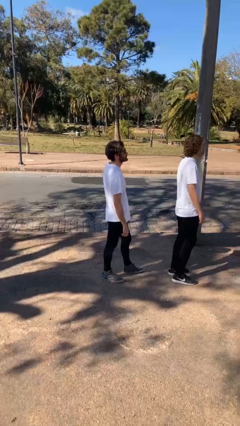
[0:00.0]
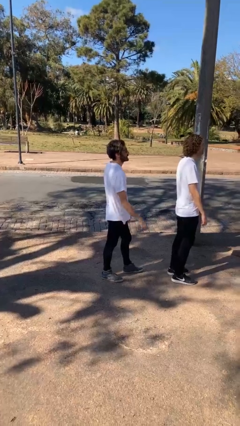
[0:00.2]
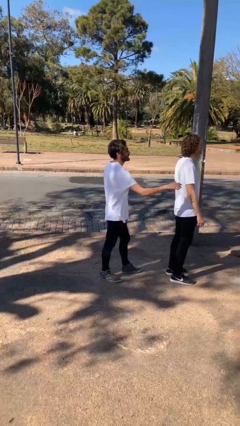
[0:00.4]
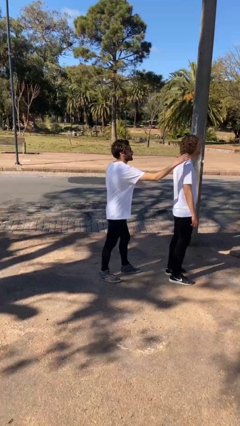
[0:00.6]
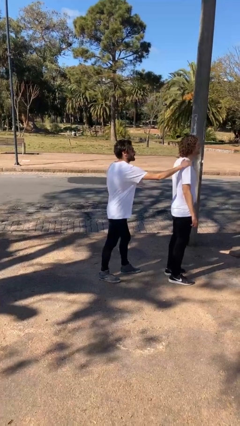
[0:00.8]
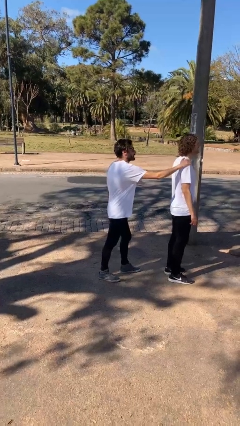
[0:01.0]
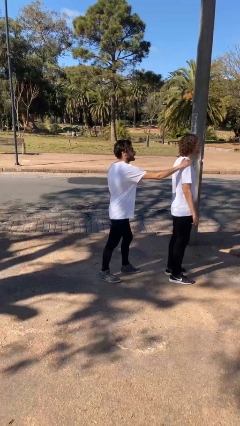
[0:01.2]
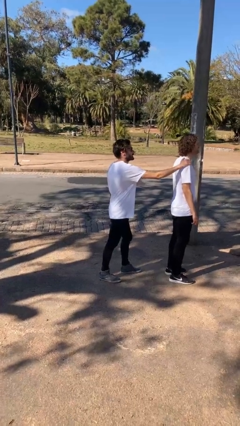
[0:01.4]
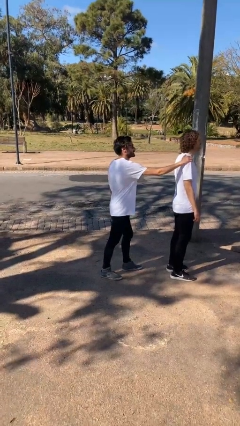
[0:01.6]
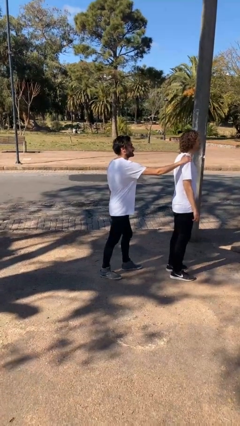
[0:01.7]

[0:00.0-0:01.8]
person grabs person by shoulder

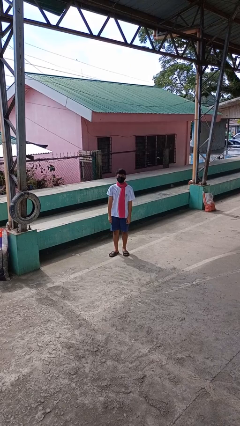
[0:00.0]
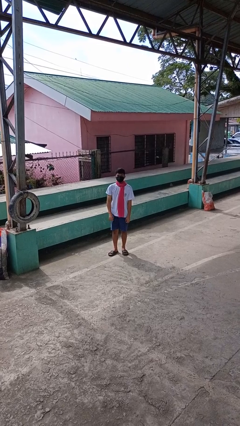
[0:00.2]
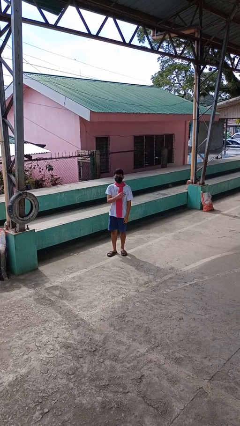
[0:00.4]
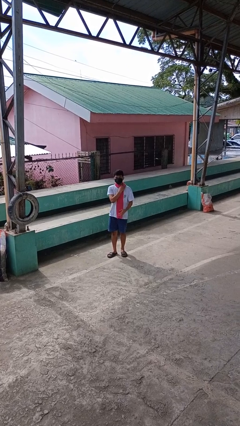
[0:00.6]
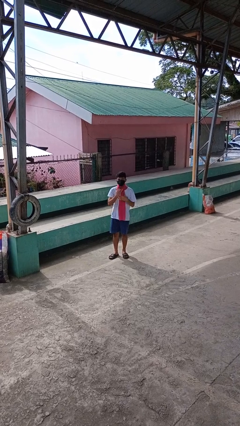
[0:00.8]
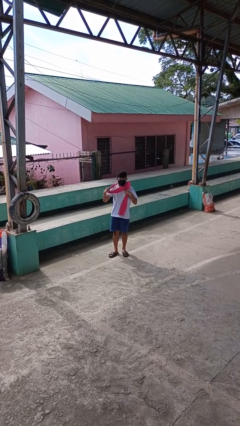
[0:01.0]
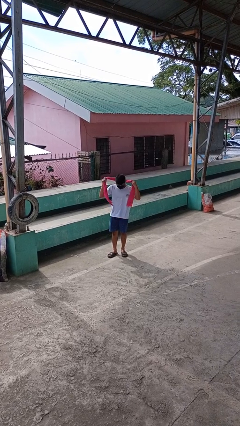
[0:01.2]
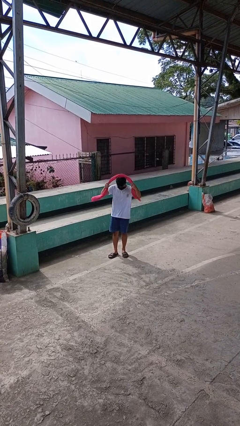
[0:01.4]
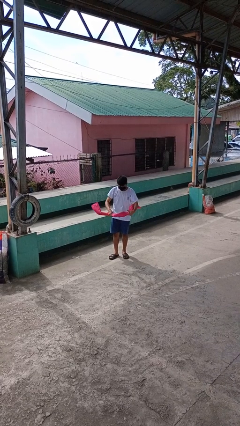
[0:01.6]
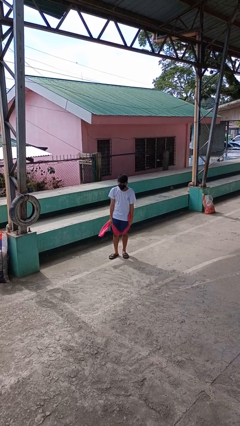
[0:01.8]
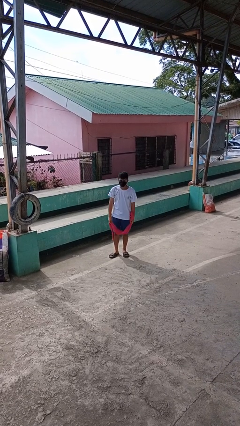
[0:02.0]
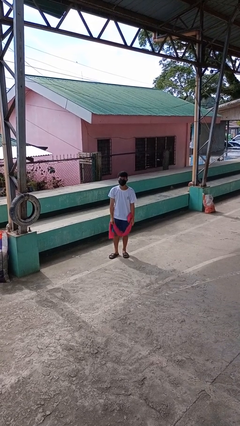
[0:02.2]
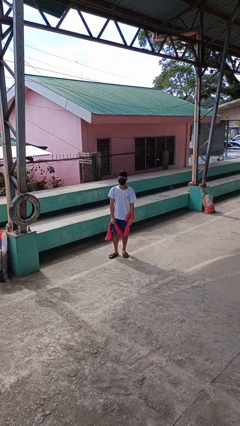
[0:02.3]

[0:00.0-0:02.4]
person takes off scarf

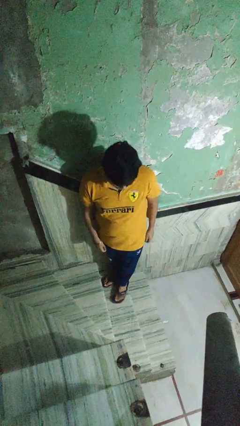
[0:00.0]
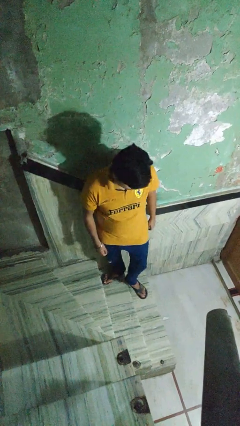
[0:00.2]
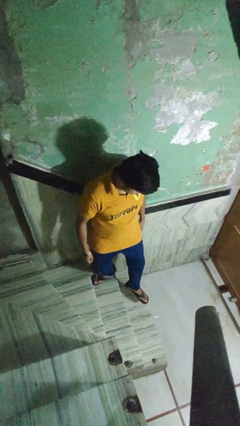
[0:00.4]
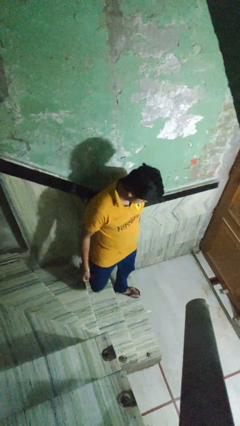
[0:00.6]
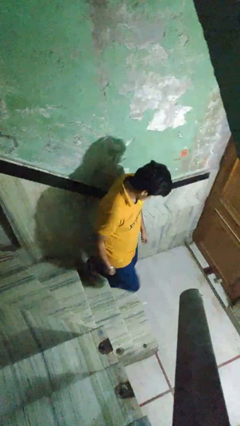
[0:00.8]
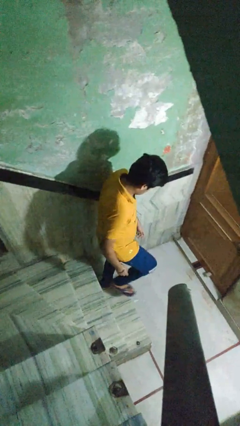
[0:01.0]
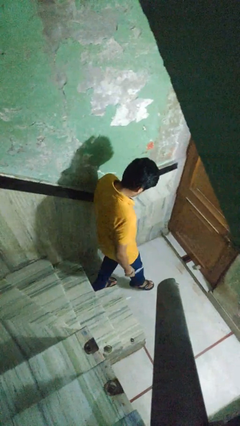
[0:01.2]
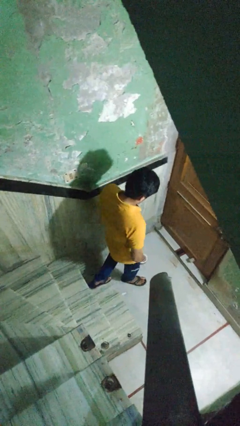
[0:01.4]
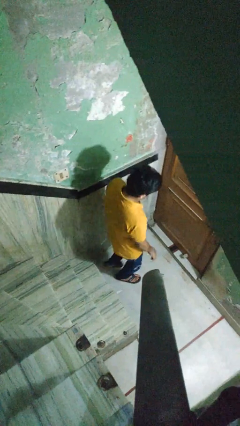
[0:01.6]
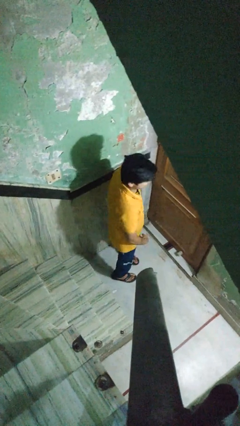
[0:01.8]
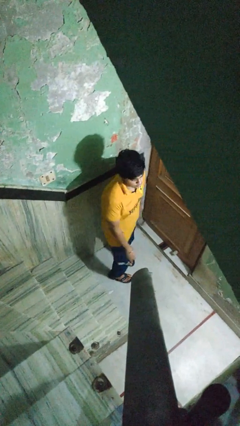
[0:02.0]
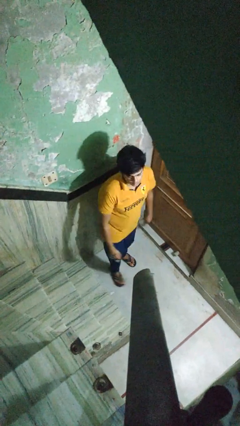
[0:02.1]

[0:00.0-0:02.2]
person climbs down stairs

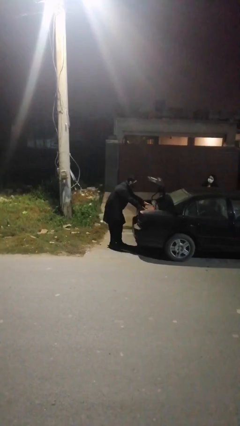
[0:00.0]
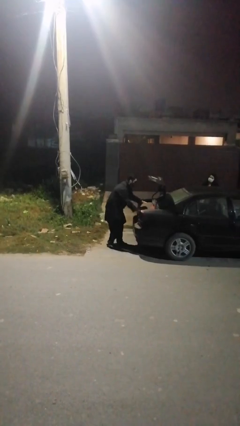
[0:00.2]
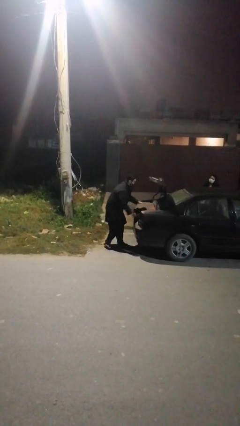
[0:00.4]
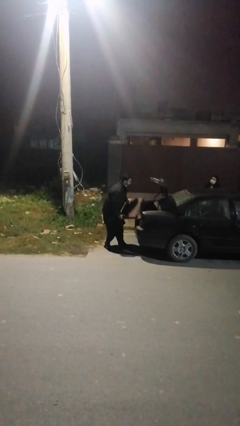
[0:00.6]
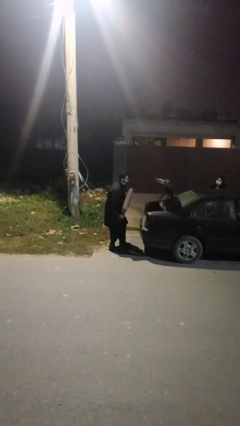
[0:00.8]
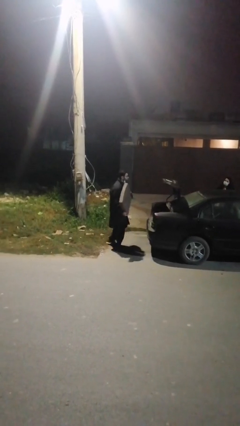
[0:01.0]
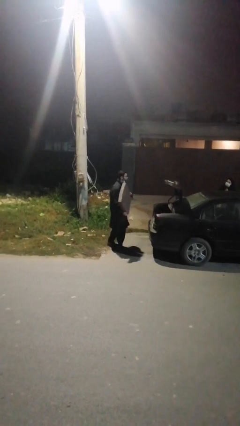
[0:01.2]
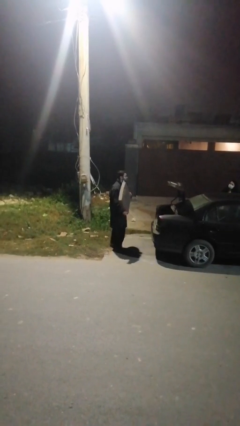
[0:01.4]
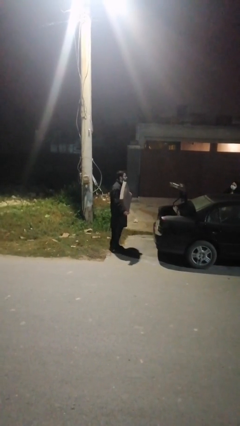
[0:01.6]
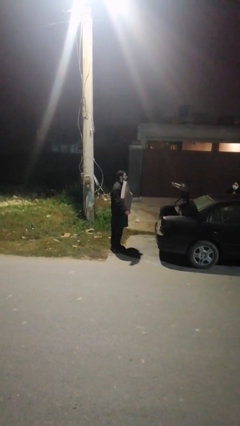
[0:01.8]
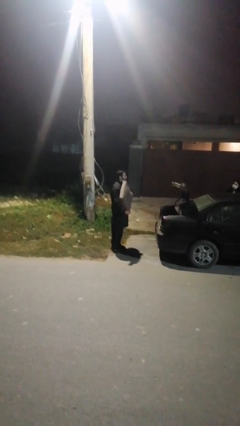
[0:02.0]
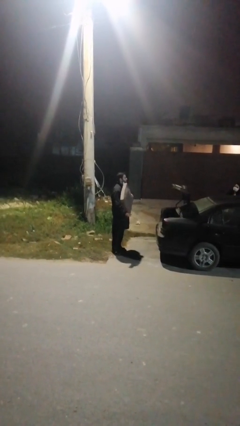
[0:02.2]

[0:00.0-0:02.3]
person unloads car

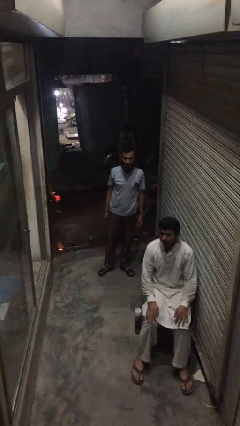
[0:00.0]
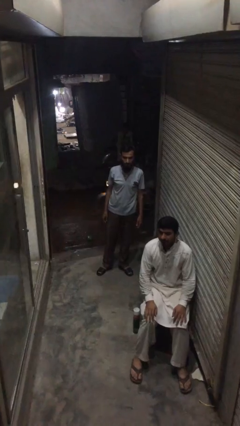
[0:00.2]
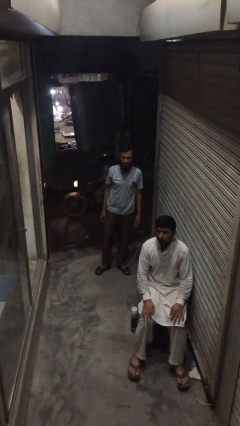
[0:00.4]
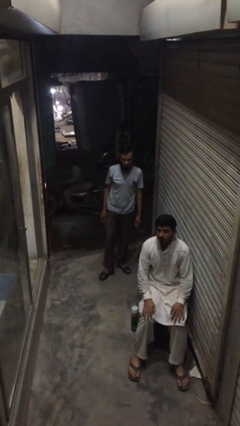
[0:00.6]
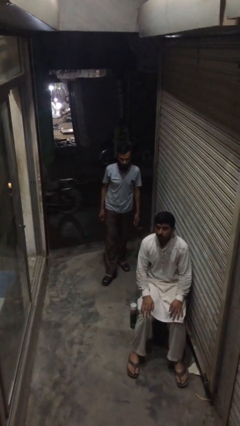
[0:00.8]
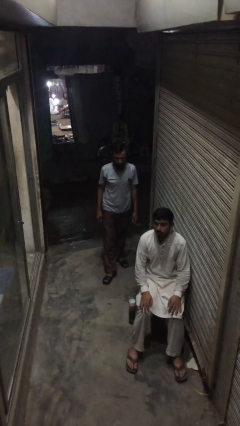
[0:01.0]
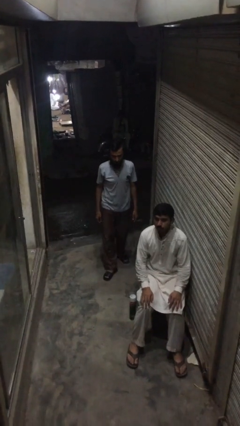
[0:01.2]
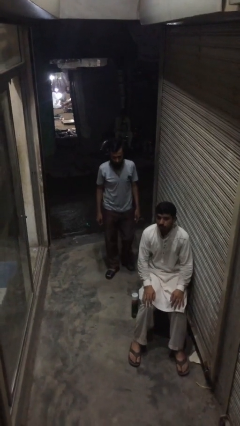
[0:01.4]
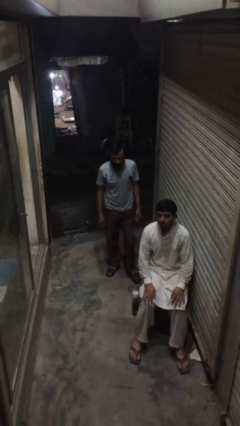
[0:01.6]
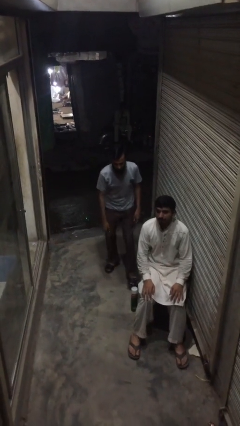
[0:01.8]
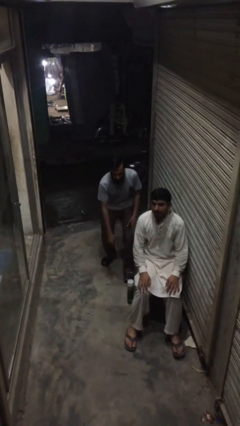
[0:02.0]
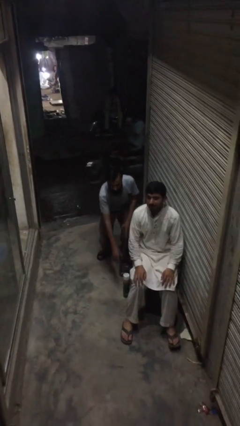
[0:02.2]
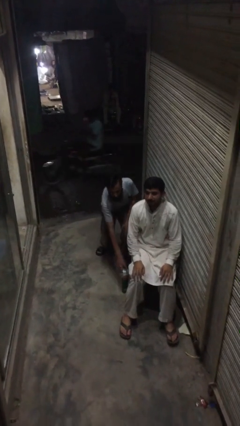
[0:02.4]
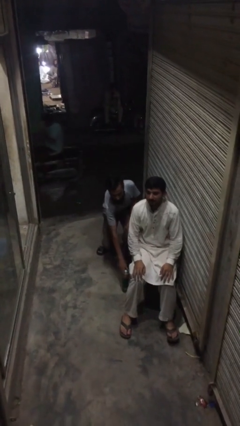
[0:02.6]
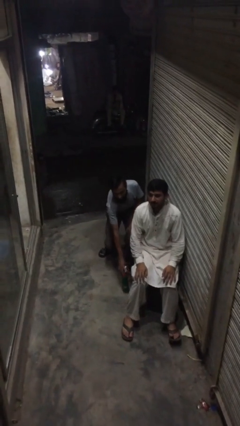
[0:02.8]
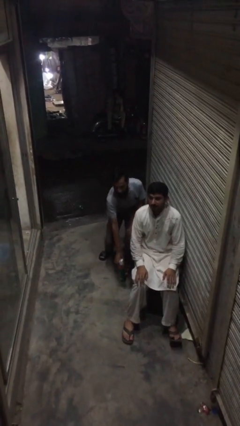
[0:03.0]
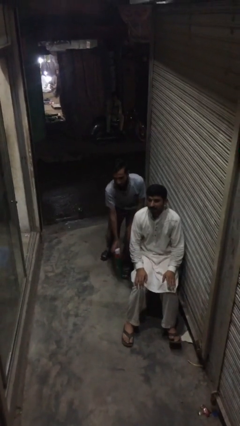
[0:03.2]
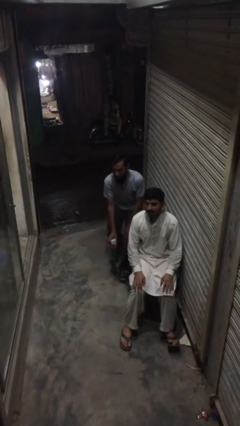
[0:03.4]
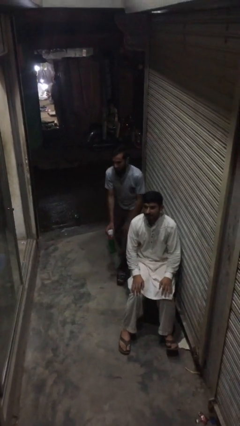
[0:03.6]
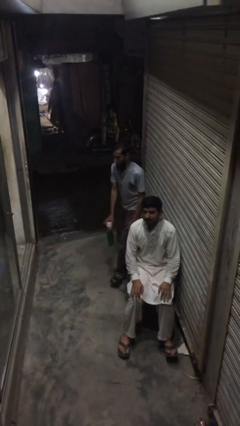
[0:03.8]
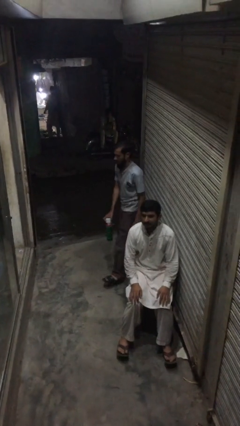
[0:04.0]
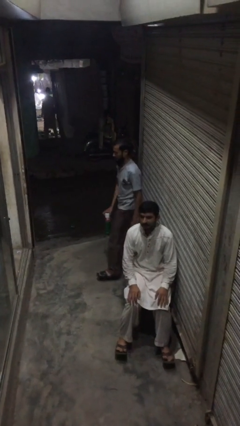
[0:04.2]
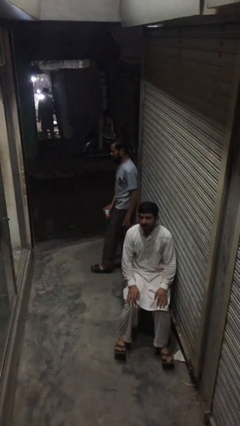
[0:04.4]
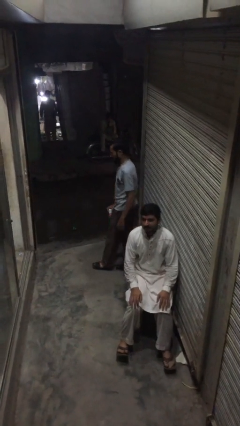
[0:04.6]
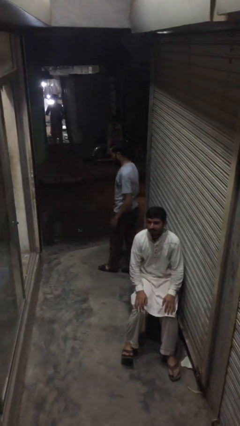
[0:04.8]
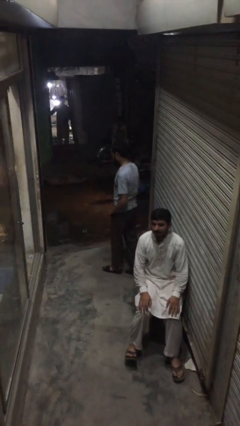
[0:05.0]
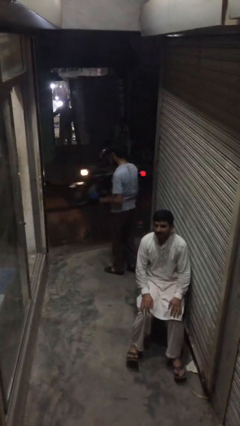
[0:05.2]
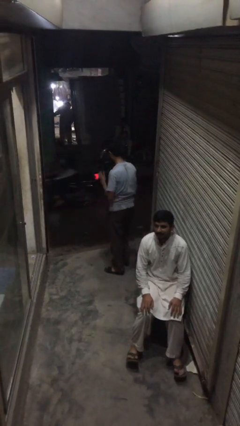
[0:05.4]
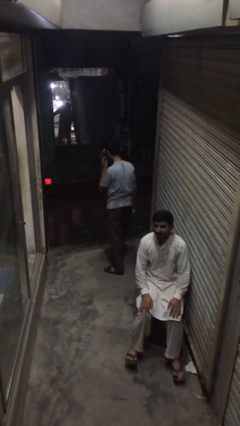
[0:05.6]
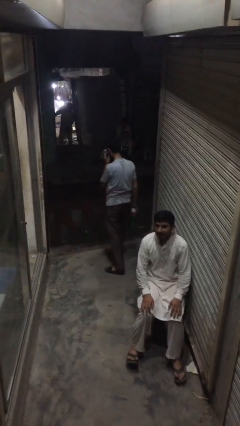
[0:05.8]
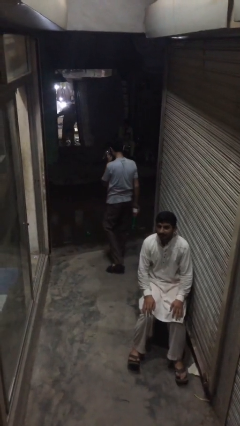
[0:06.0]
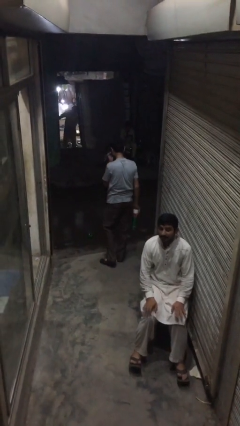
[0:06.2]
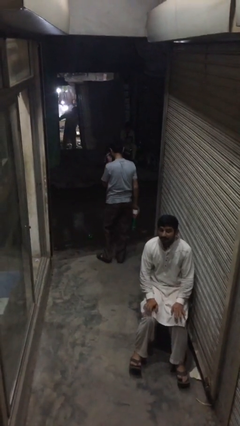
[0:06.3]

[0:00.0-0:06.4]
person steals object from person

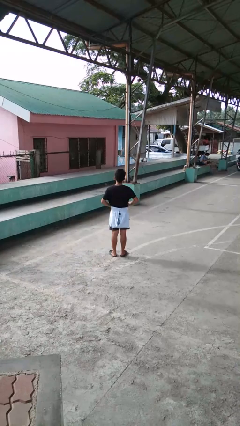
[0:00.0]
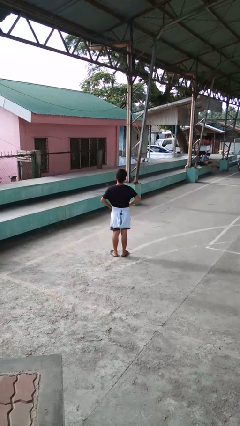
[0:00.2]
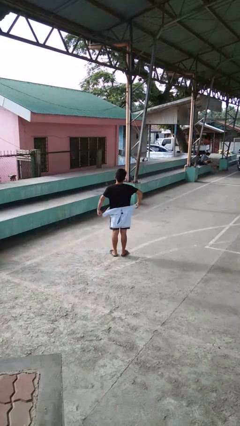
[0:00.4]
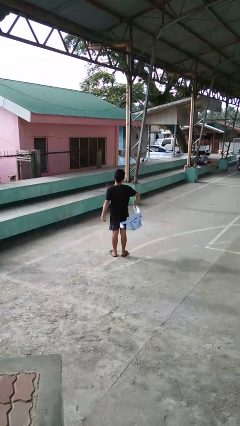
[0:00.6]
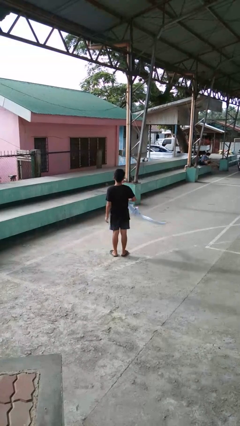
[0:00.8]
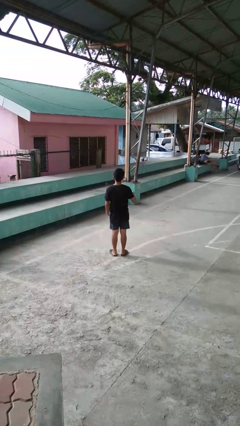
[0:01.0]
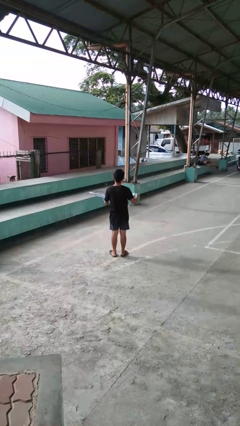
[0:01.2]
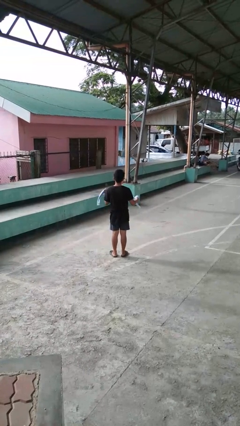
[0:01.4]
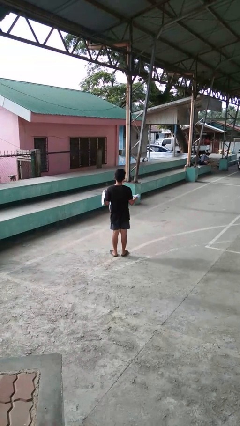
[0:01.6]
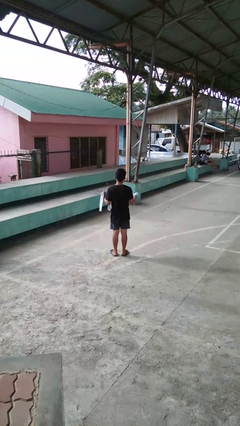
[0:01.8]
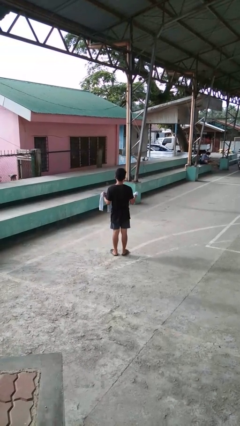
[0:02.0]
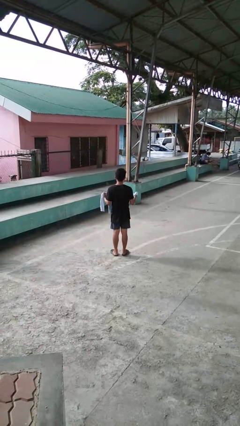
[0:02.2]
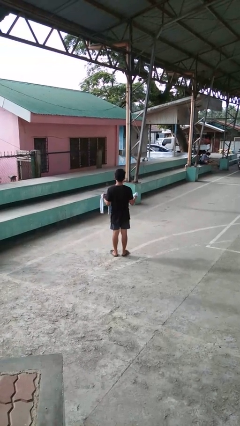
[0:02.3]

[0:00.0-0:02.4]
person unties jacket around waist
